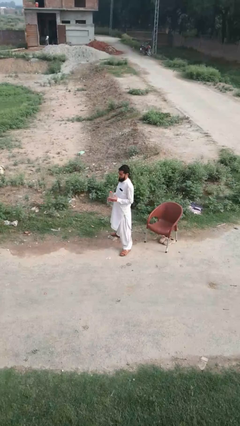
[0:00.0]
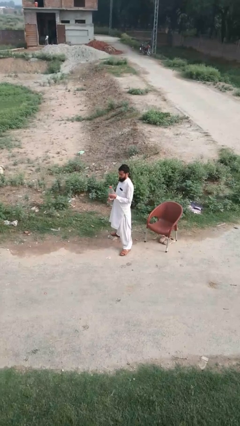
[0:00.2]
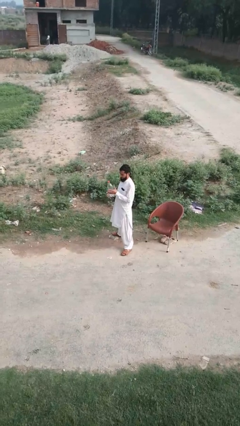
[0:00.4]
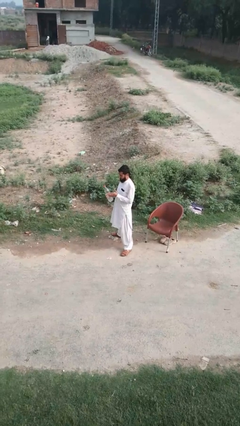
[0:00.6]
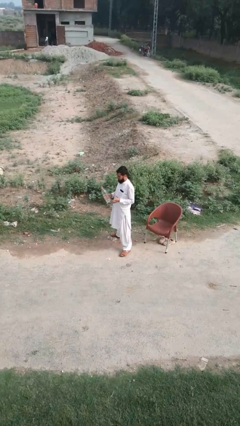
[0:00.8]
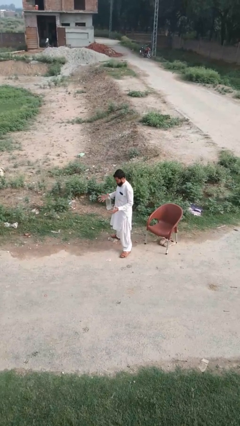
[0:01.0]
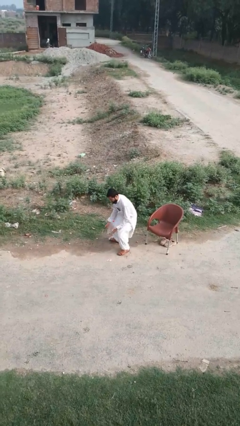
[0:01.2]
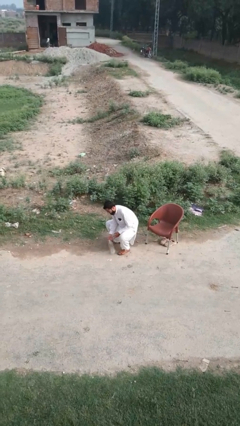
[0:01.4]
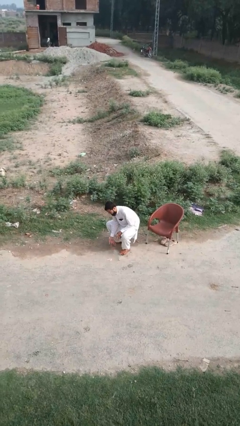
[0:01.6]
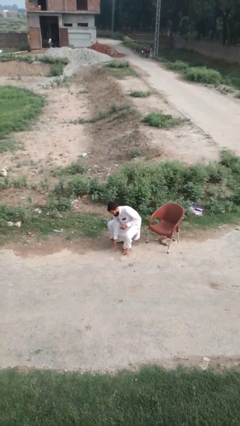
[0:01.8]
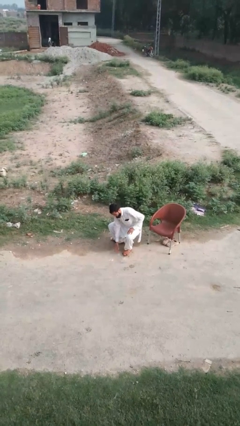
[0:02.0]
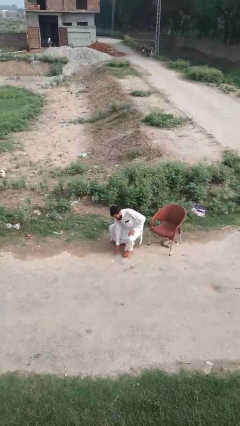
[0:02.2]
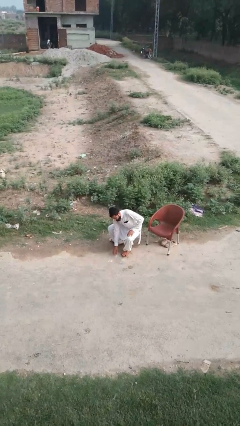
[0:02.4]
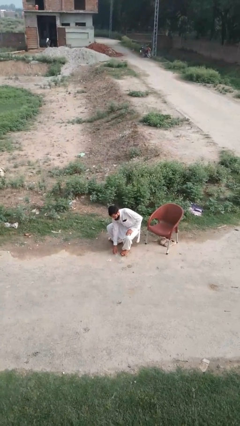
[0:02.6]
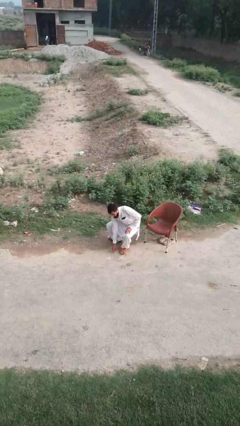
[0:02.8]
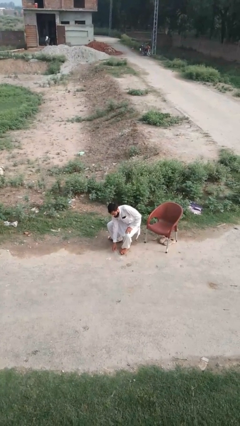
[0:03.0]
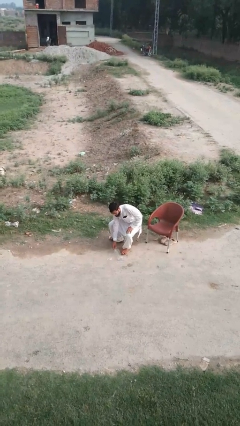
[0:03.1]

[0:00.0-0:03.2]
person drops object

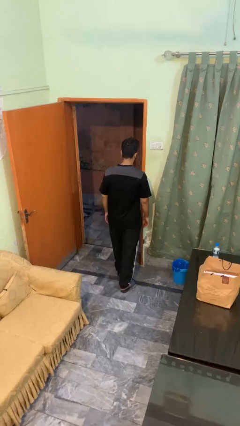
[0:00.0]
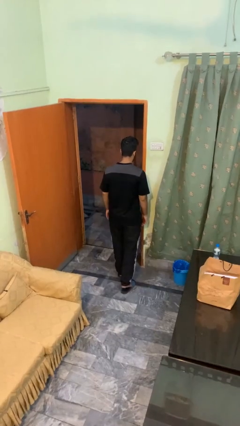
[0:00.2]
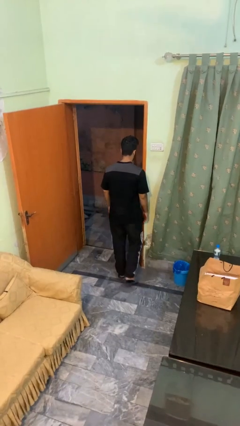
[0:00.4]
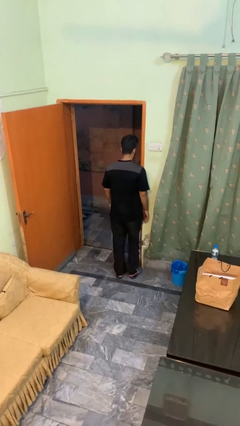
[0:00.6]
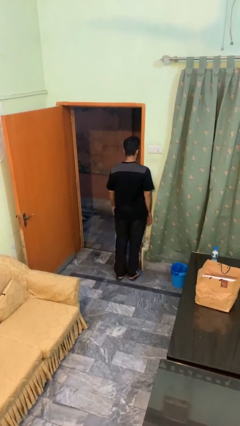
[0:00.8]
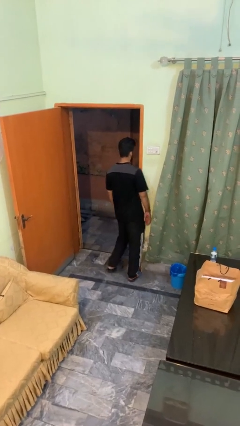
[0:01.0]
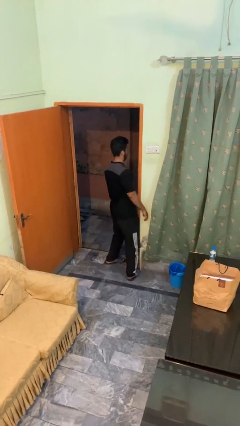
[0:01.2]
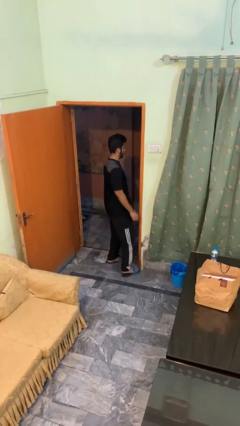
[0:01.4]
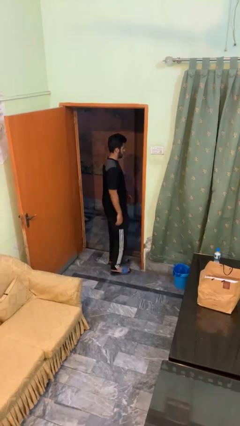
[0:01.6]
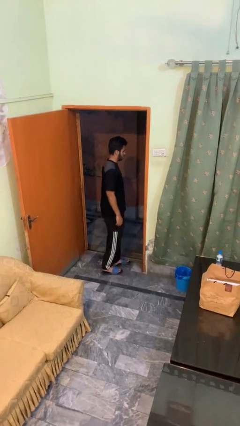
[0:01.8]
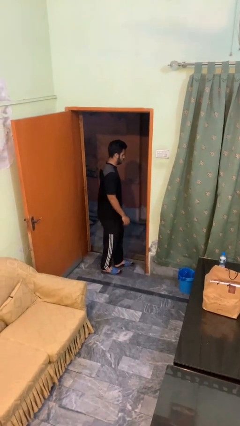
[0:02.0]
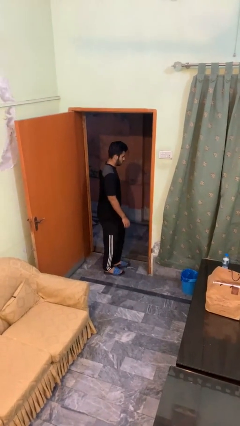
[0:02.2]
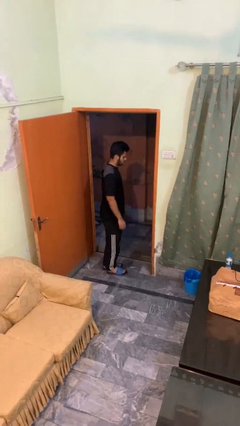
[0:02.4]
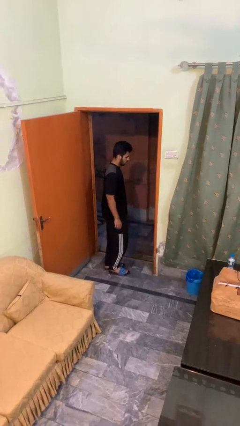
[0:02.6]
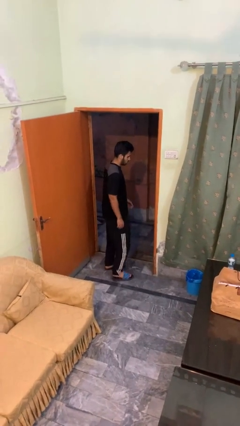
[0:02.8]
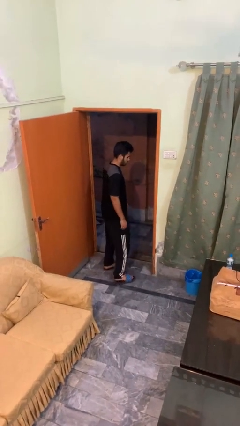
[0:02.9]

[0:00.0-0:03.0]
person bumps into wall

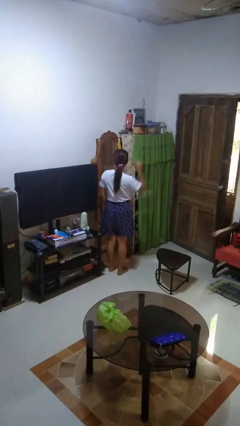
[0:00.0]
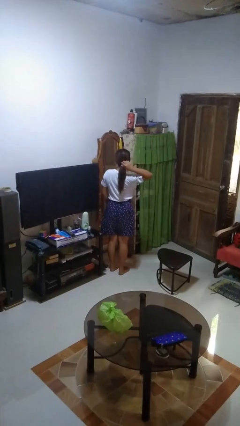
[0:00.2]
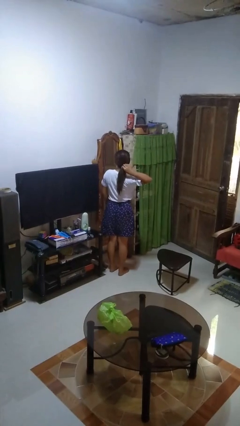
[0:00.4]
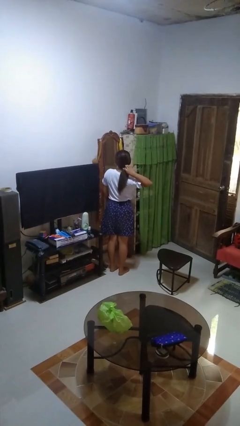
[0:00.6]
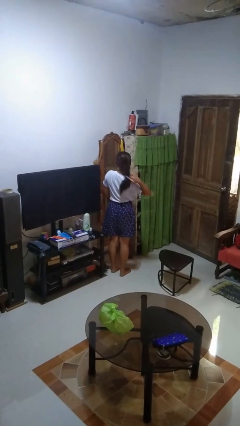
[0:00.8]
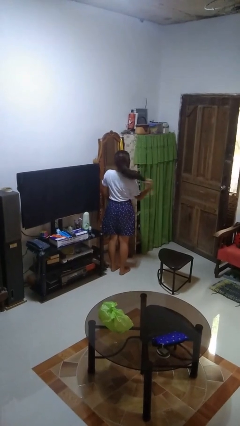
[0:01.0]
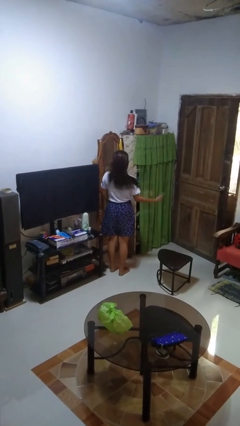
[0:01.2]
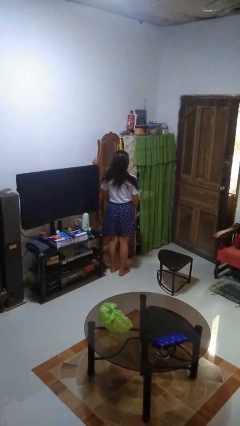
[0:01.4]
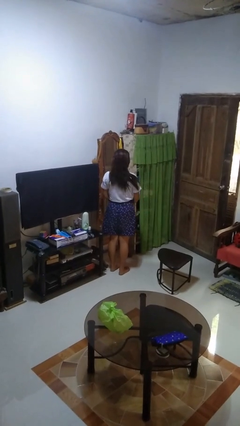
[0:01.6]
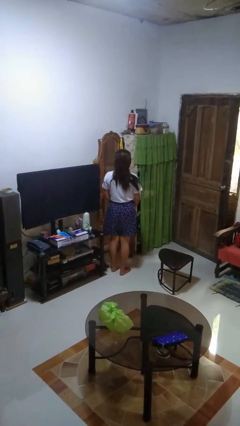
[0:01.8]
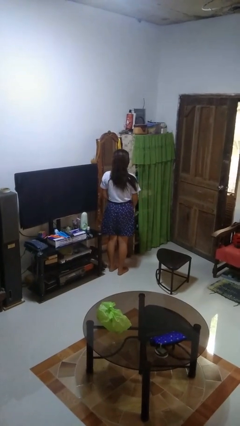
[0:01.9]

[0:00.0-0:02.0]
person takes off hairtie

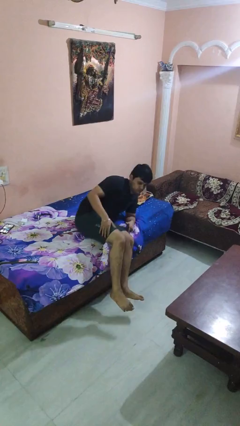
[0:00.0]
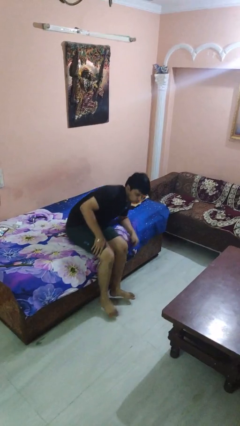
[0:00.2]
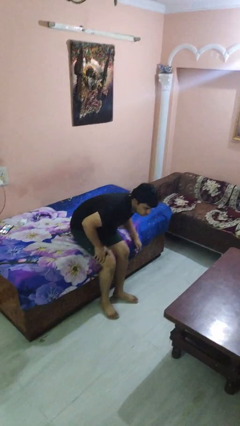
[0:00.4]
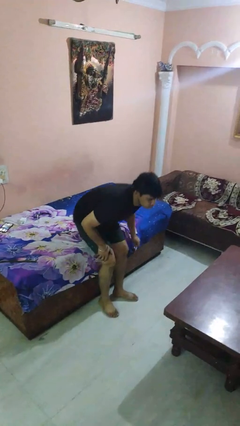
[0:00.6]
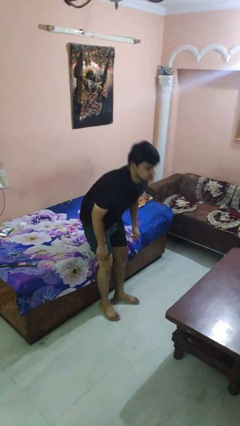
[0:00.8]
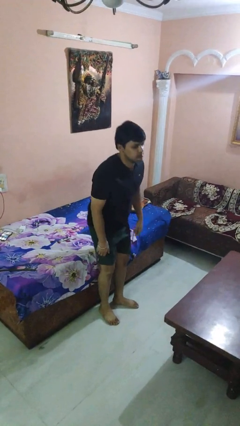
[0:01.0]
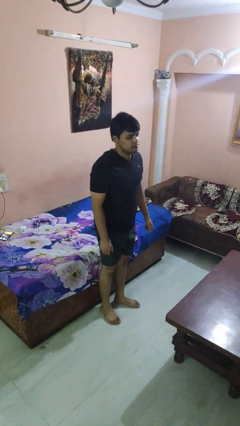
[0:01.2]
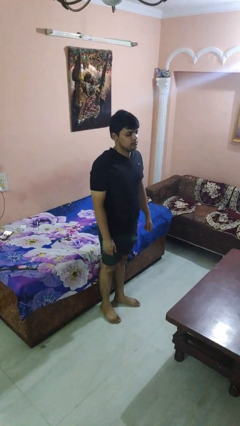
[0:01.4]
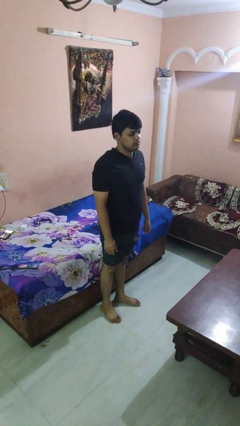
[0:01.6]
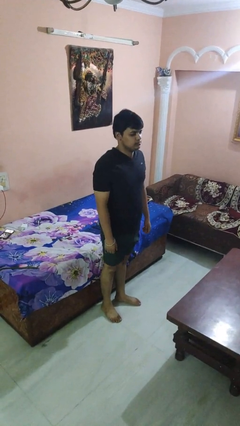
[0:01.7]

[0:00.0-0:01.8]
person stands up

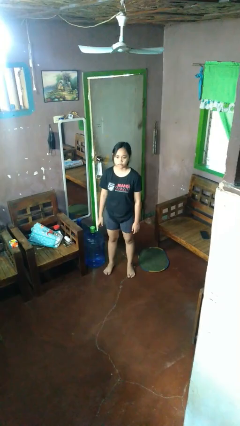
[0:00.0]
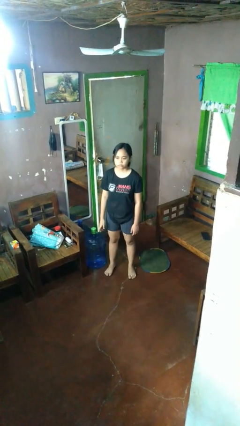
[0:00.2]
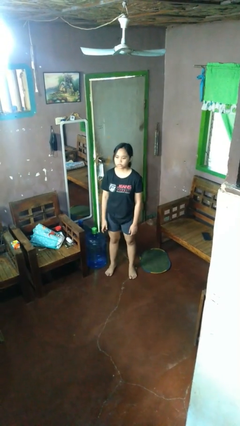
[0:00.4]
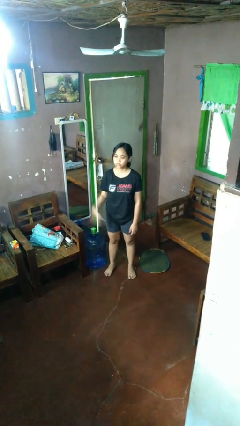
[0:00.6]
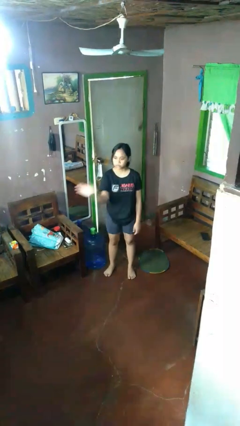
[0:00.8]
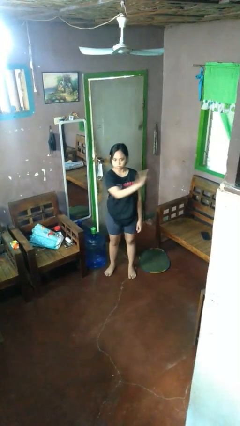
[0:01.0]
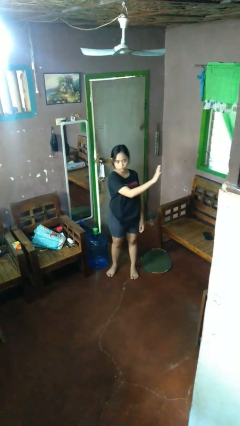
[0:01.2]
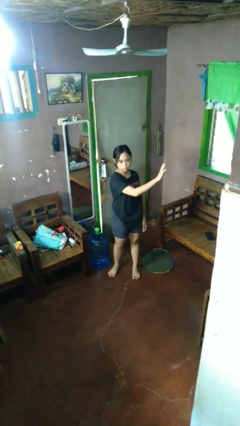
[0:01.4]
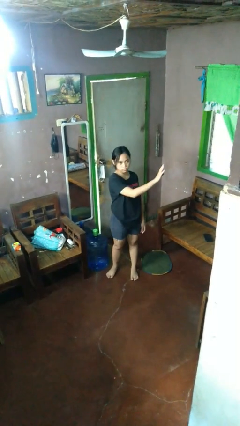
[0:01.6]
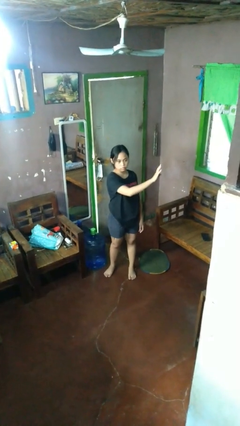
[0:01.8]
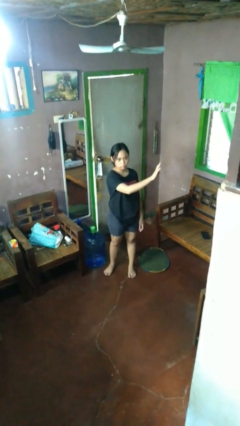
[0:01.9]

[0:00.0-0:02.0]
person gestures swipe left

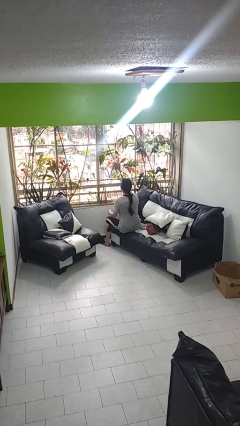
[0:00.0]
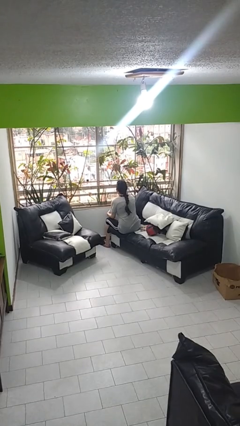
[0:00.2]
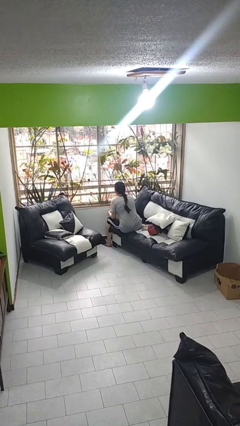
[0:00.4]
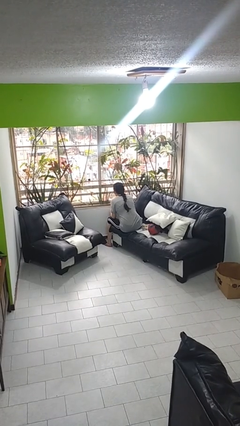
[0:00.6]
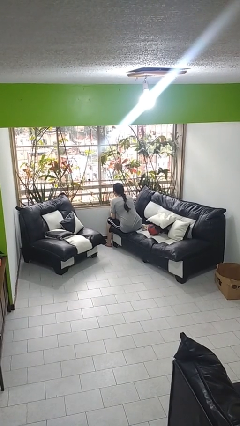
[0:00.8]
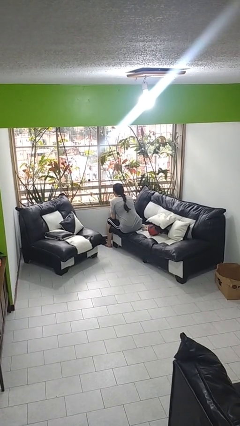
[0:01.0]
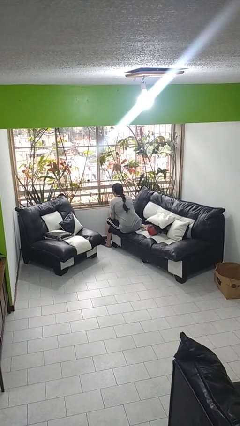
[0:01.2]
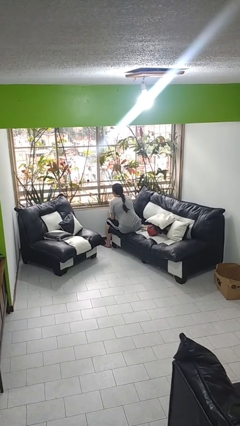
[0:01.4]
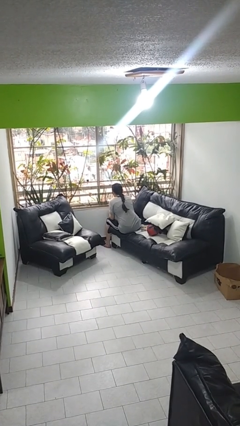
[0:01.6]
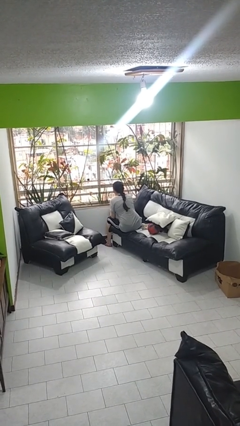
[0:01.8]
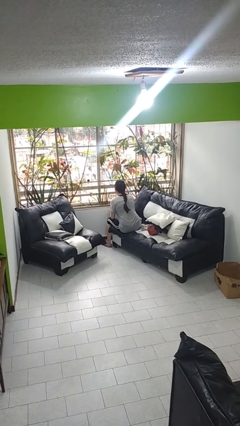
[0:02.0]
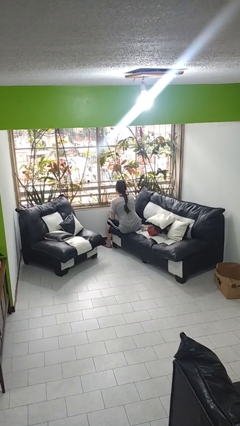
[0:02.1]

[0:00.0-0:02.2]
person looks at hands in lap

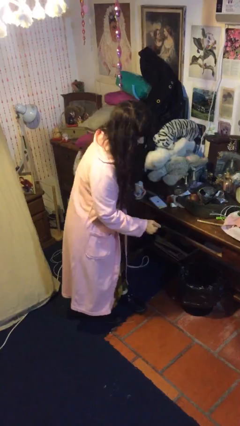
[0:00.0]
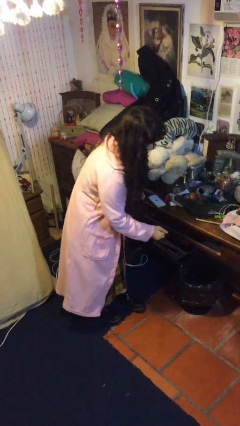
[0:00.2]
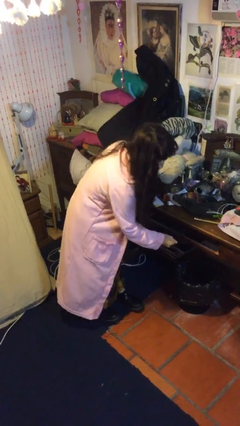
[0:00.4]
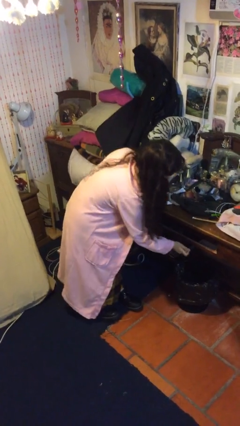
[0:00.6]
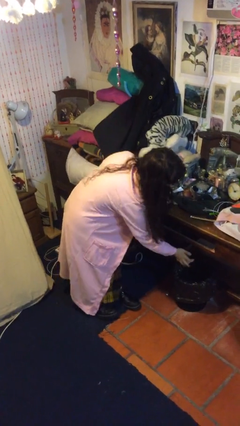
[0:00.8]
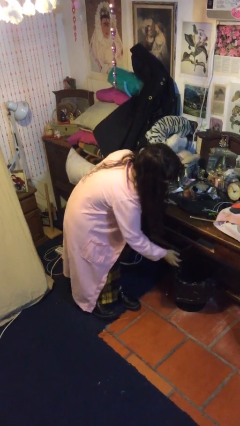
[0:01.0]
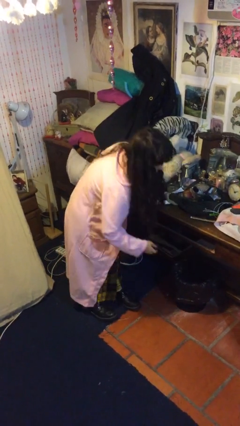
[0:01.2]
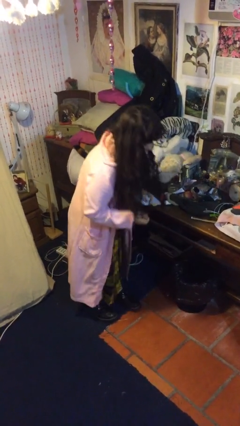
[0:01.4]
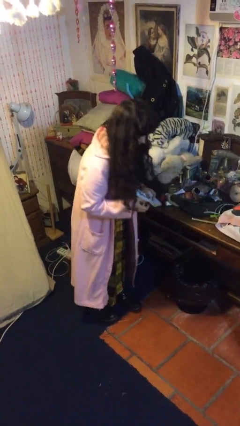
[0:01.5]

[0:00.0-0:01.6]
person discards trash

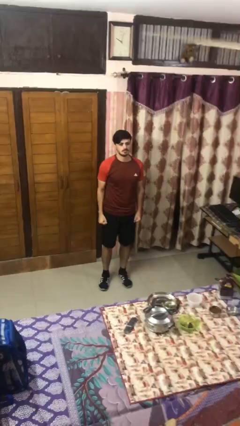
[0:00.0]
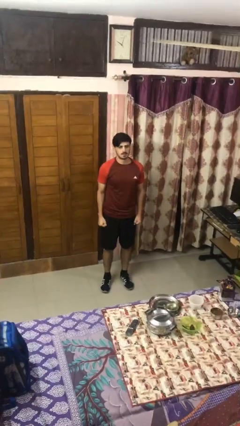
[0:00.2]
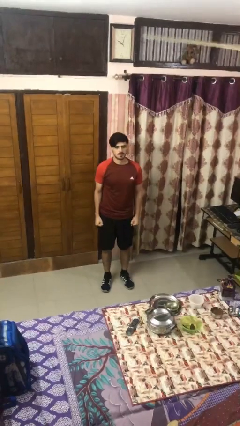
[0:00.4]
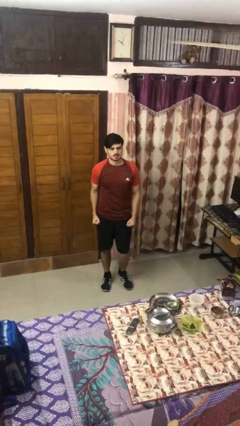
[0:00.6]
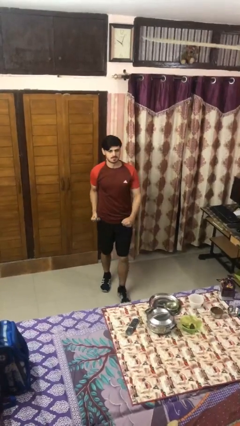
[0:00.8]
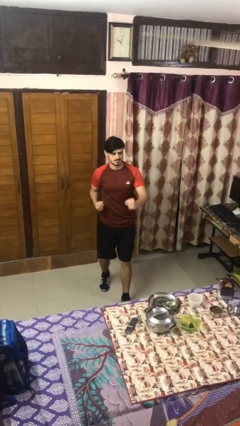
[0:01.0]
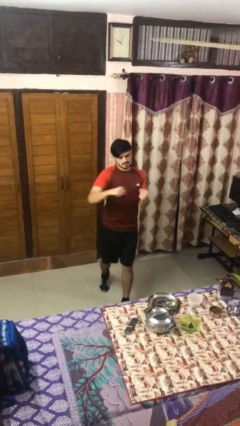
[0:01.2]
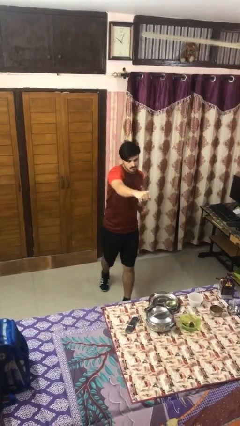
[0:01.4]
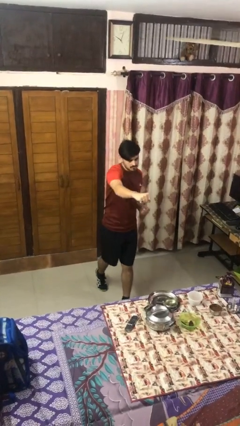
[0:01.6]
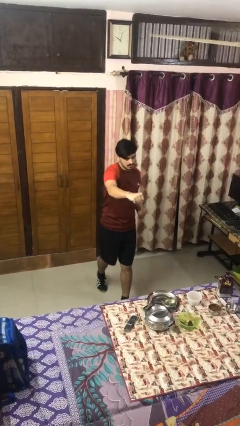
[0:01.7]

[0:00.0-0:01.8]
person punches
